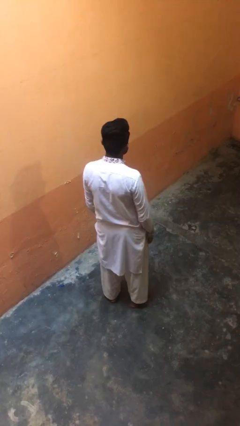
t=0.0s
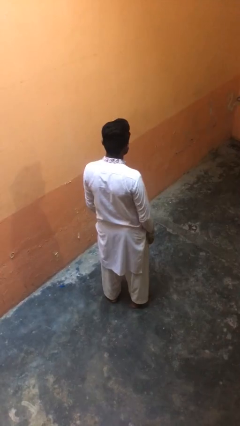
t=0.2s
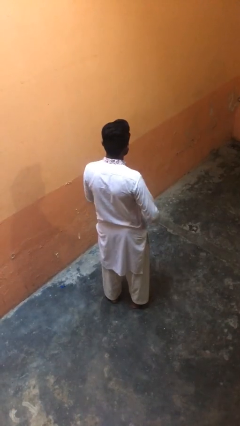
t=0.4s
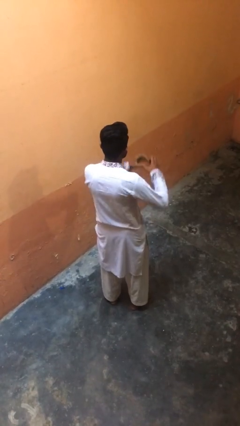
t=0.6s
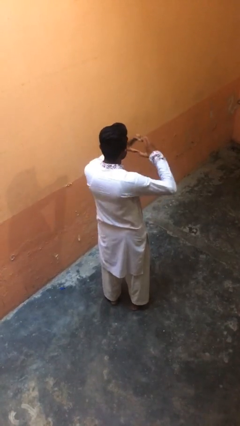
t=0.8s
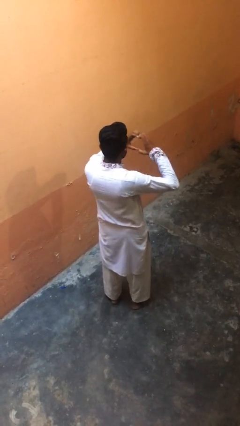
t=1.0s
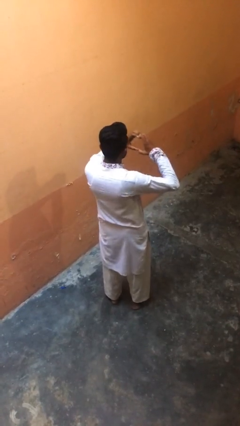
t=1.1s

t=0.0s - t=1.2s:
person gestures heart

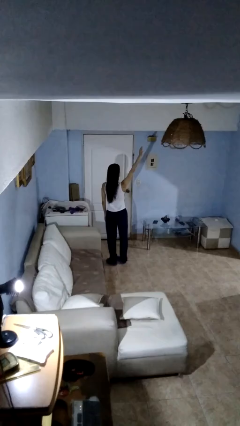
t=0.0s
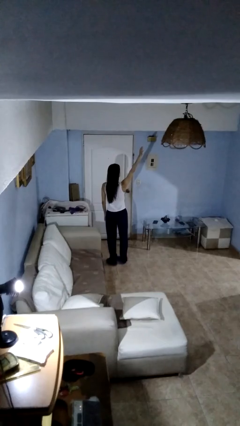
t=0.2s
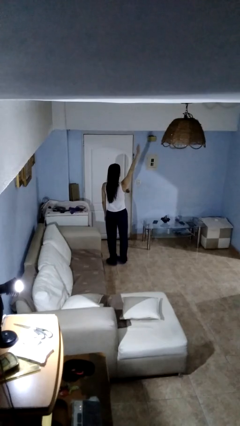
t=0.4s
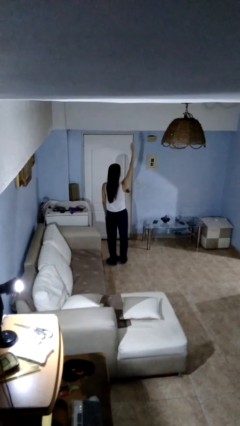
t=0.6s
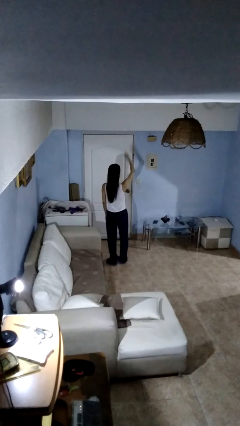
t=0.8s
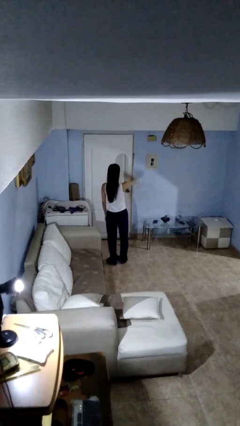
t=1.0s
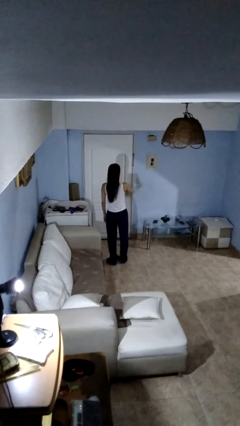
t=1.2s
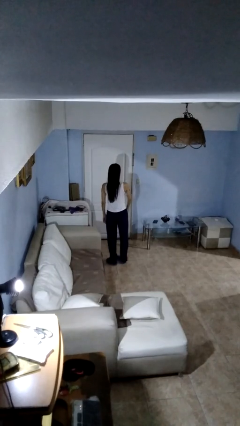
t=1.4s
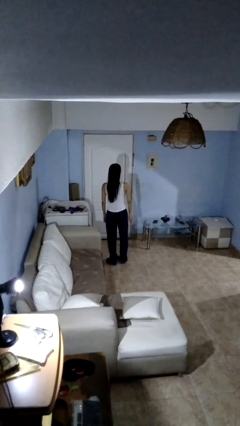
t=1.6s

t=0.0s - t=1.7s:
person gestures swipe down

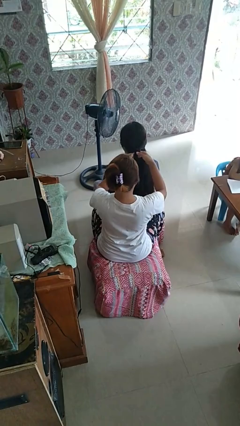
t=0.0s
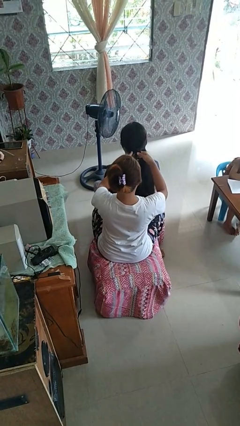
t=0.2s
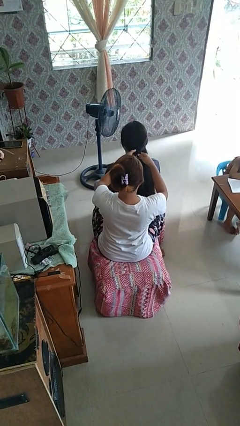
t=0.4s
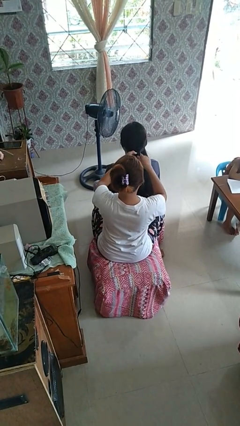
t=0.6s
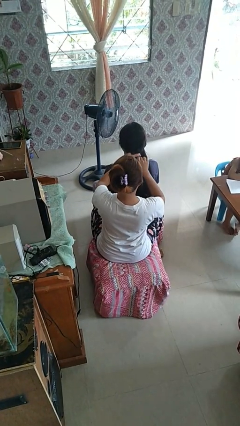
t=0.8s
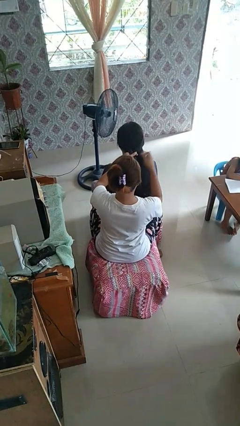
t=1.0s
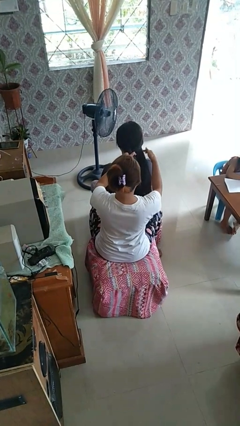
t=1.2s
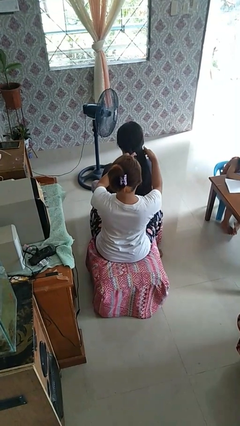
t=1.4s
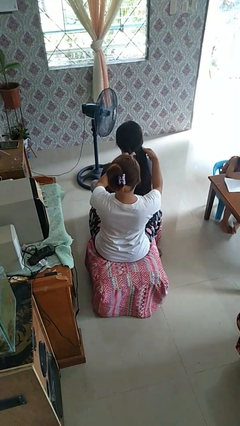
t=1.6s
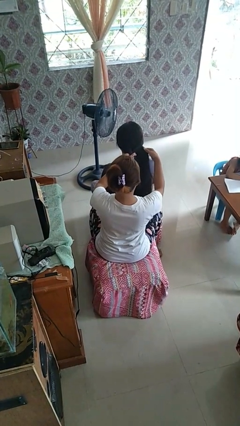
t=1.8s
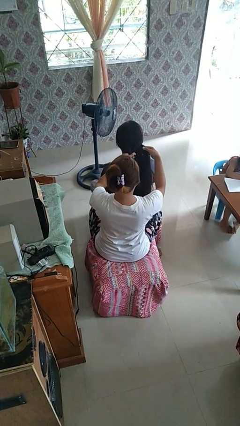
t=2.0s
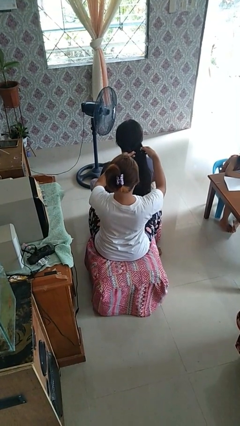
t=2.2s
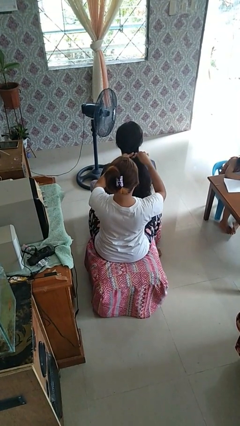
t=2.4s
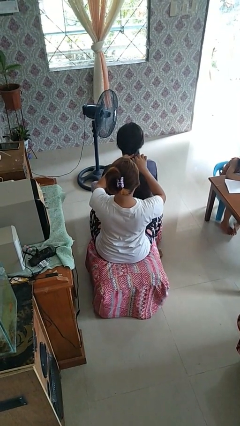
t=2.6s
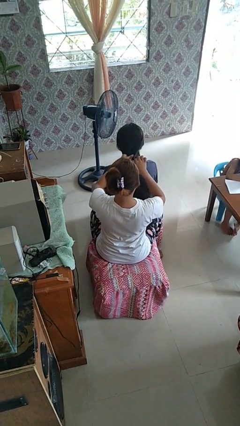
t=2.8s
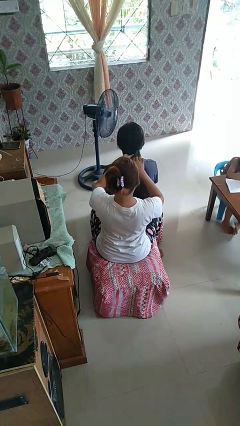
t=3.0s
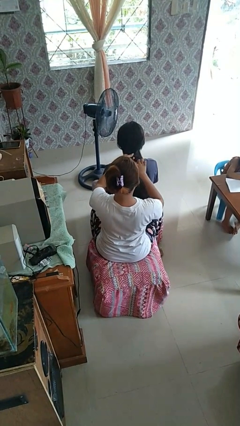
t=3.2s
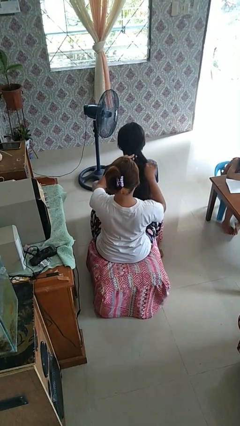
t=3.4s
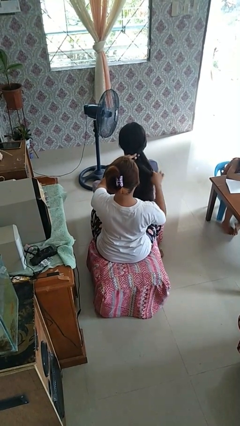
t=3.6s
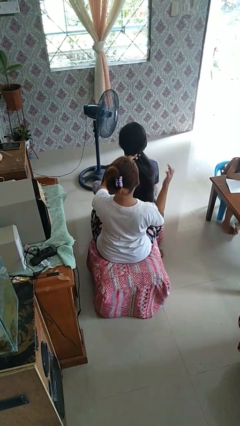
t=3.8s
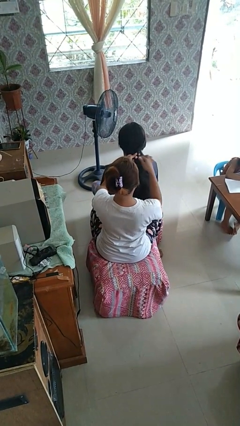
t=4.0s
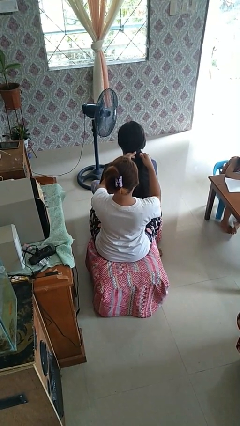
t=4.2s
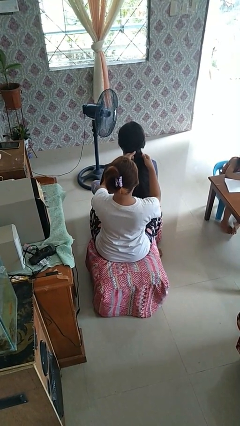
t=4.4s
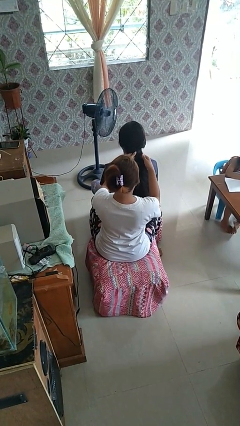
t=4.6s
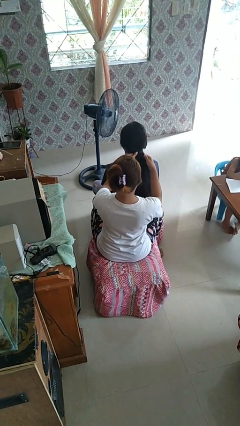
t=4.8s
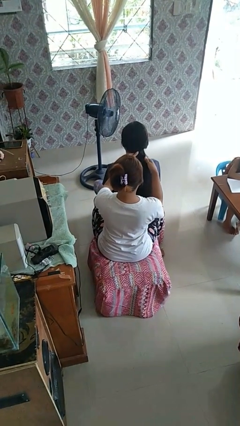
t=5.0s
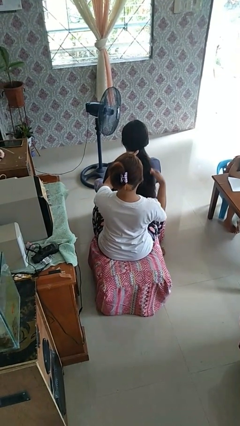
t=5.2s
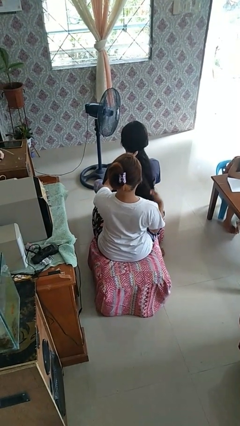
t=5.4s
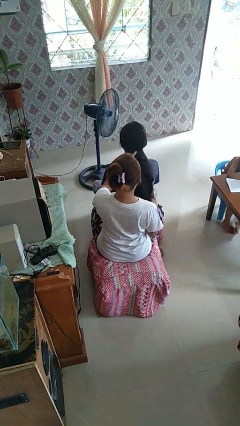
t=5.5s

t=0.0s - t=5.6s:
person braids hair of person

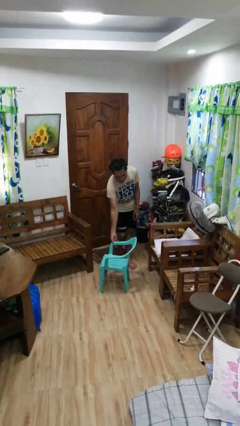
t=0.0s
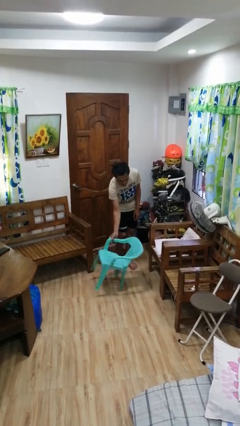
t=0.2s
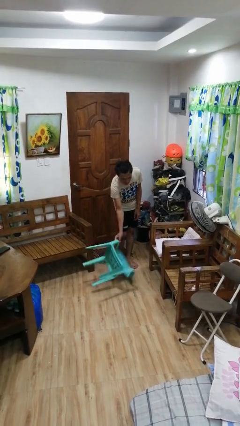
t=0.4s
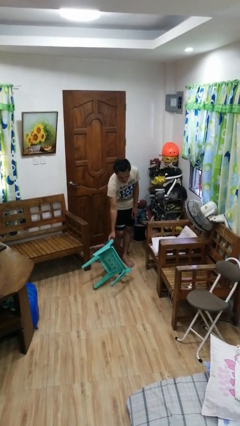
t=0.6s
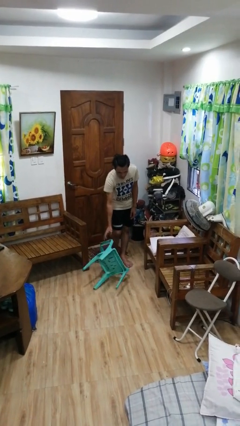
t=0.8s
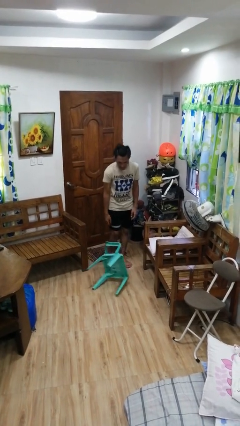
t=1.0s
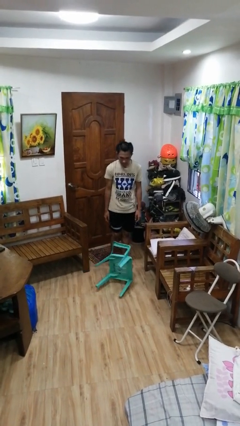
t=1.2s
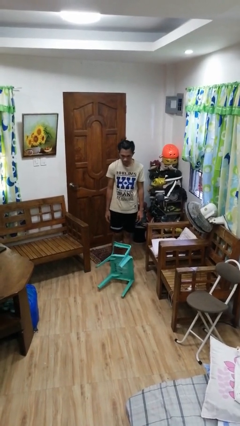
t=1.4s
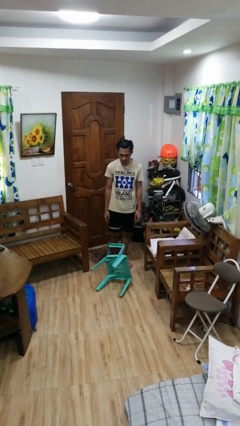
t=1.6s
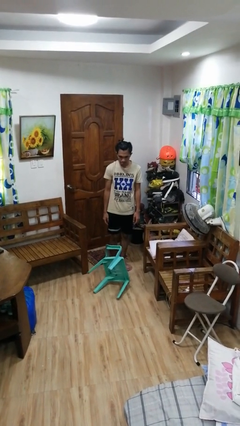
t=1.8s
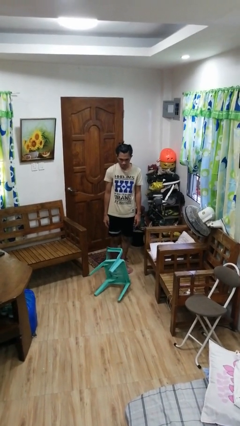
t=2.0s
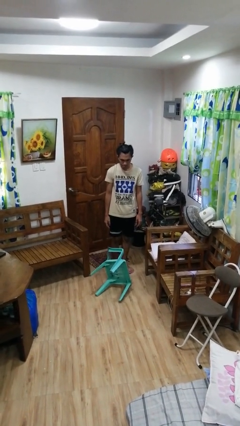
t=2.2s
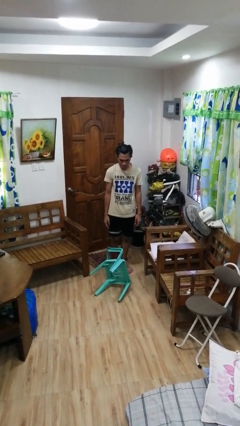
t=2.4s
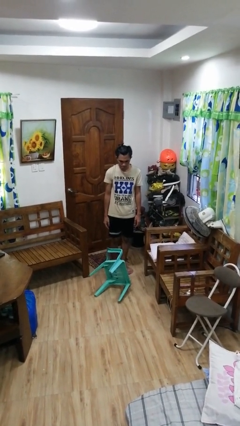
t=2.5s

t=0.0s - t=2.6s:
person knocks over furniture

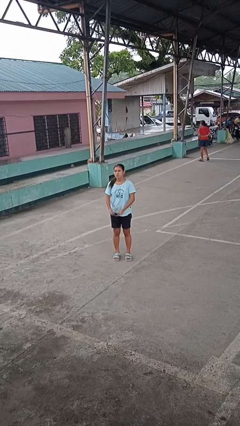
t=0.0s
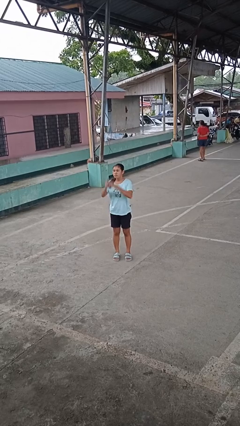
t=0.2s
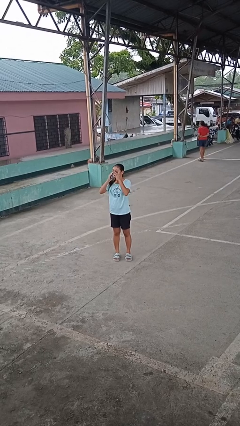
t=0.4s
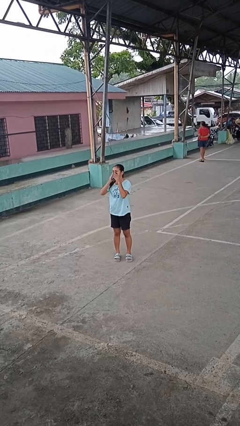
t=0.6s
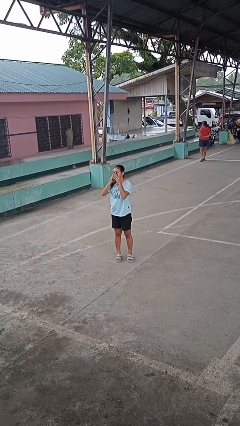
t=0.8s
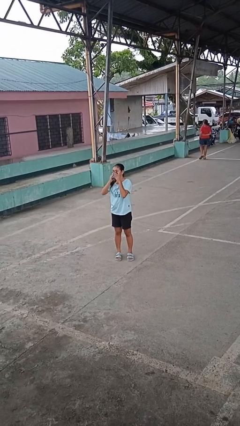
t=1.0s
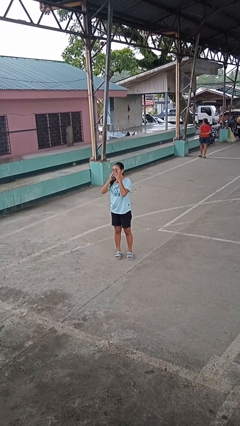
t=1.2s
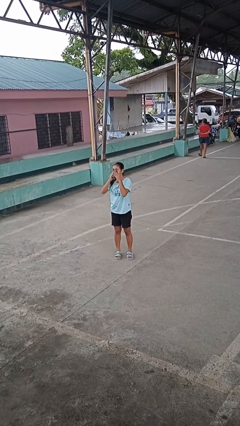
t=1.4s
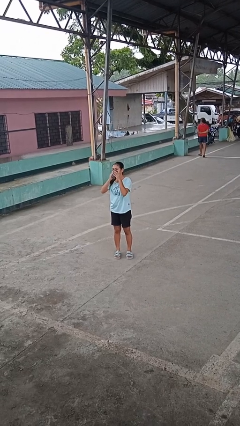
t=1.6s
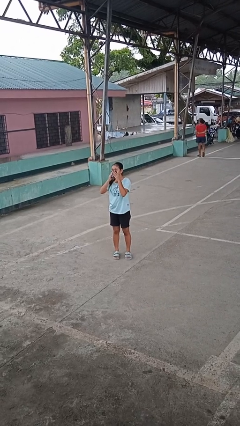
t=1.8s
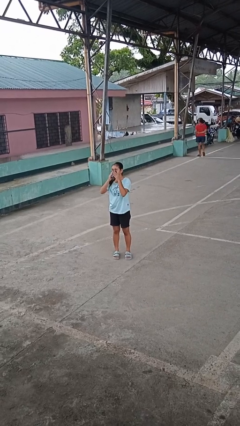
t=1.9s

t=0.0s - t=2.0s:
person blows nose

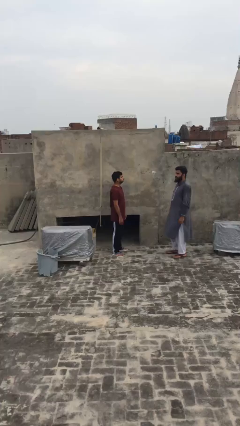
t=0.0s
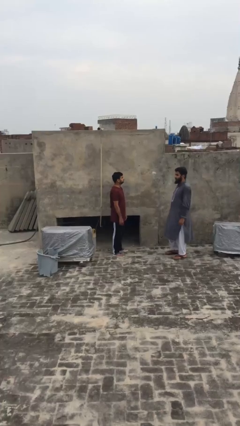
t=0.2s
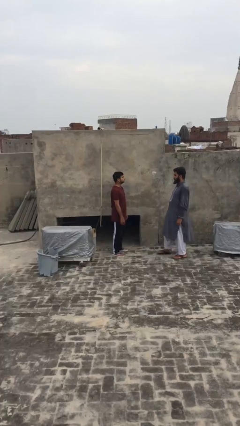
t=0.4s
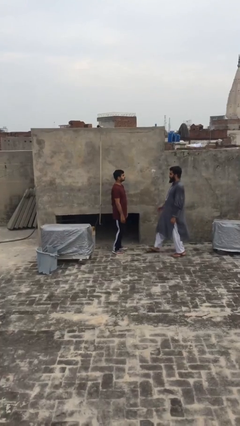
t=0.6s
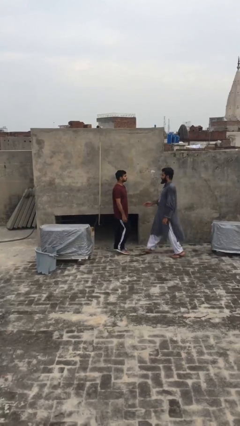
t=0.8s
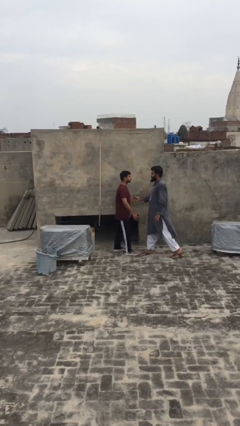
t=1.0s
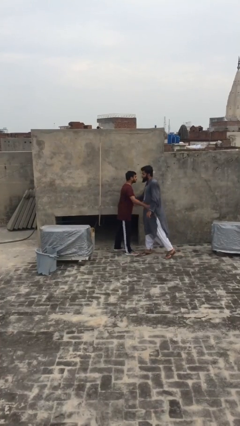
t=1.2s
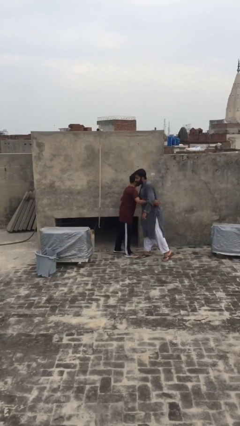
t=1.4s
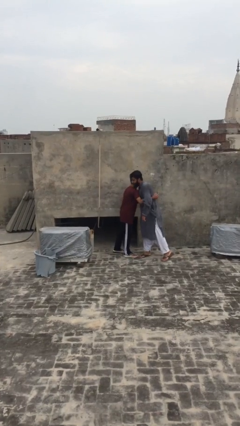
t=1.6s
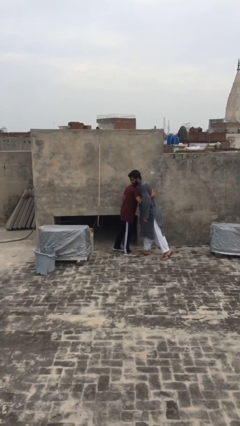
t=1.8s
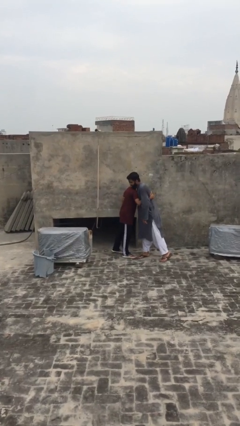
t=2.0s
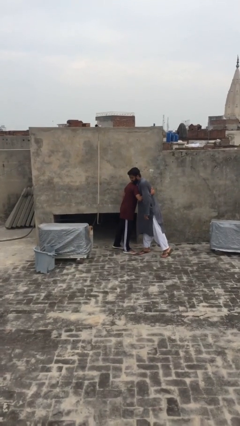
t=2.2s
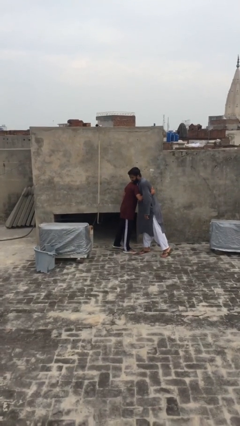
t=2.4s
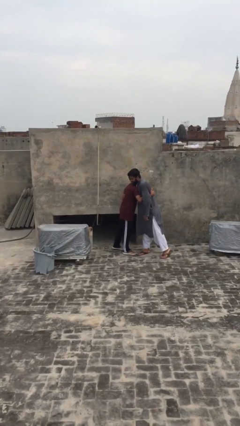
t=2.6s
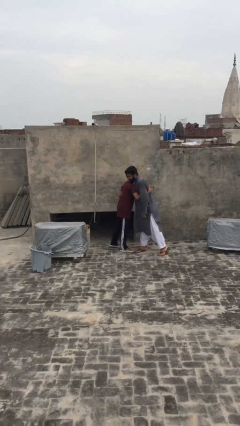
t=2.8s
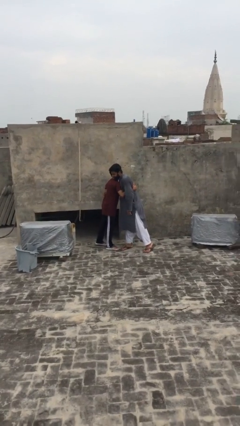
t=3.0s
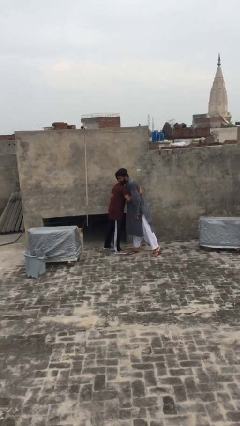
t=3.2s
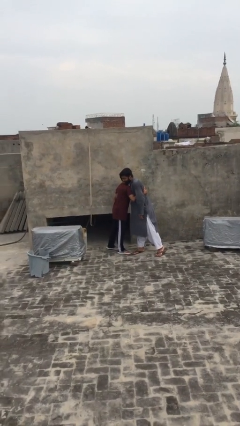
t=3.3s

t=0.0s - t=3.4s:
person embraces person

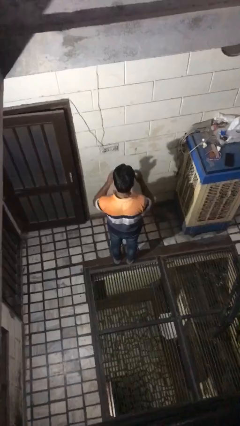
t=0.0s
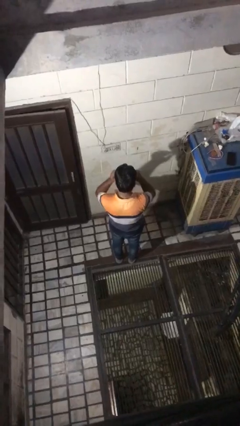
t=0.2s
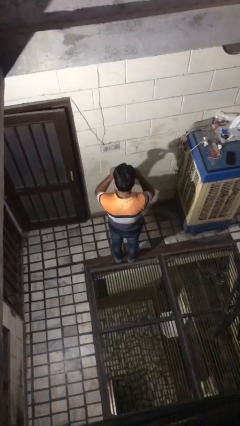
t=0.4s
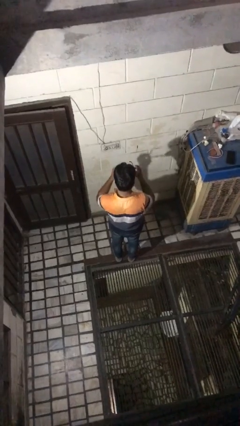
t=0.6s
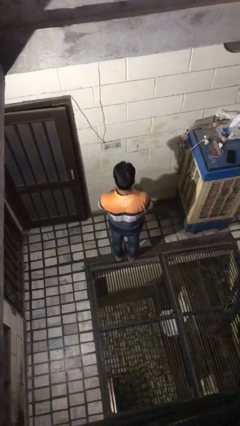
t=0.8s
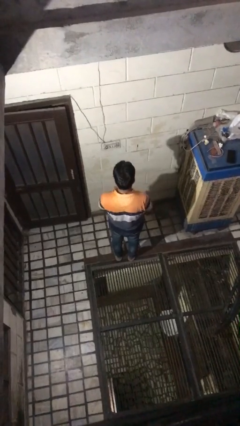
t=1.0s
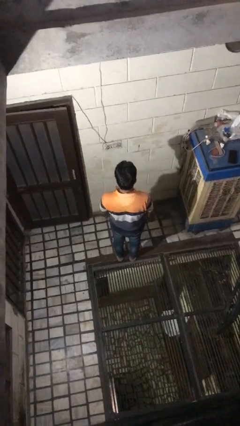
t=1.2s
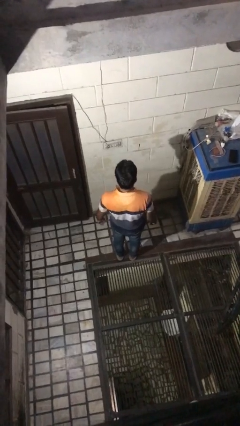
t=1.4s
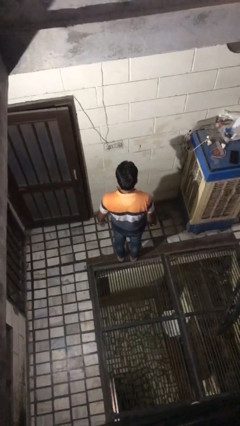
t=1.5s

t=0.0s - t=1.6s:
person takes off glasses
